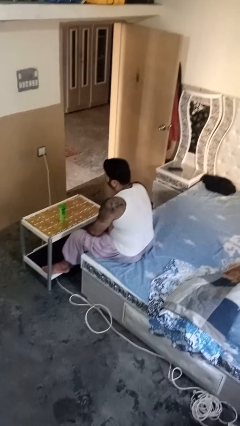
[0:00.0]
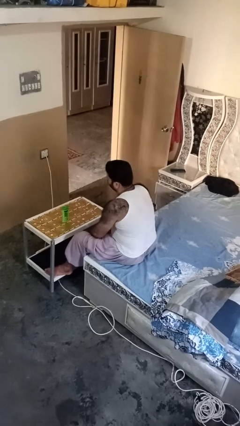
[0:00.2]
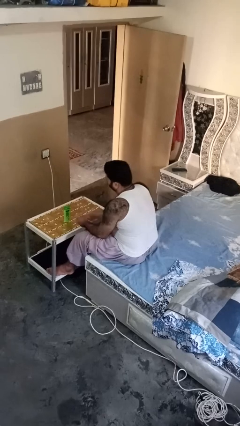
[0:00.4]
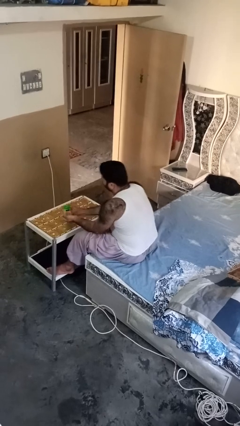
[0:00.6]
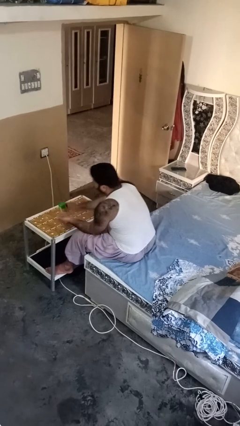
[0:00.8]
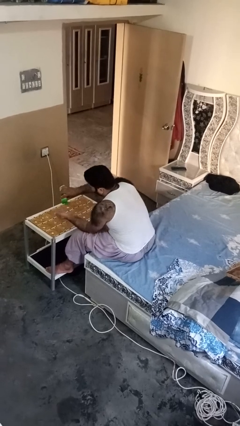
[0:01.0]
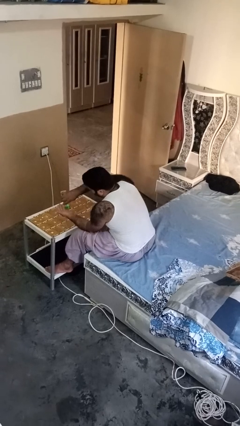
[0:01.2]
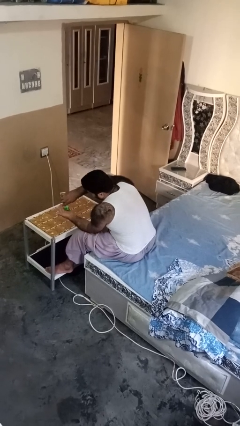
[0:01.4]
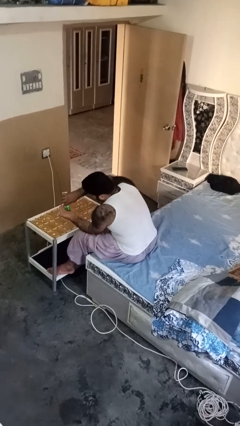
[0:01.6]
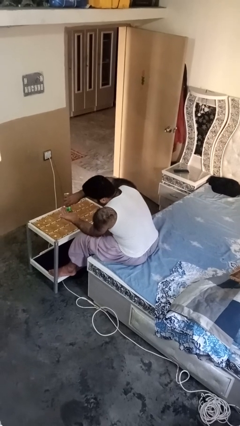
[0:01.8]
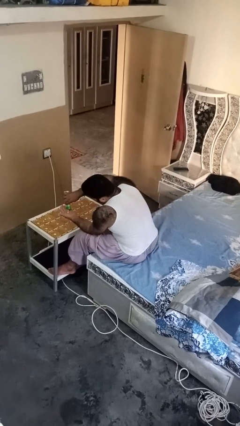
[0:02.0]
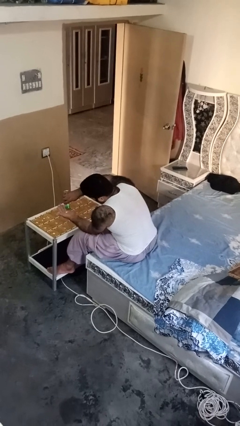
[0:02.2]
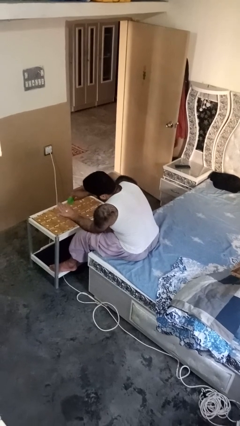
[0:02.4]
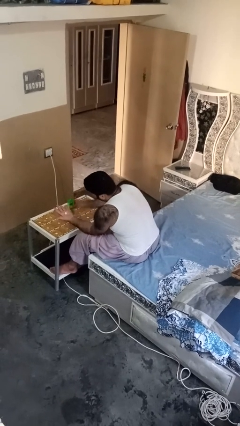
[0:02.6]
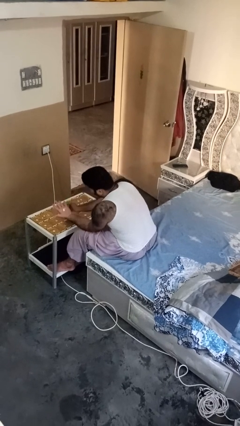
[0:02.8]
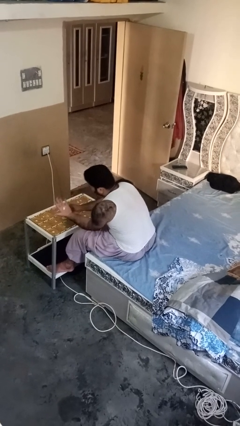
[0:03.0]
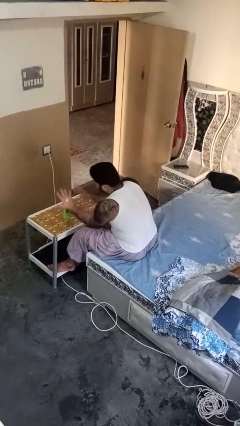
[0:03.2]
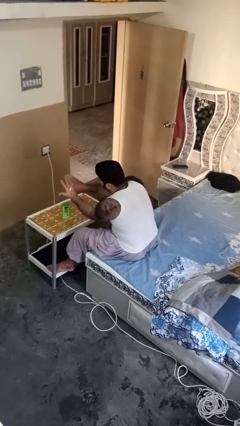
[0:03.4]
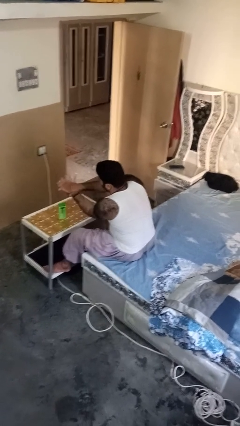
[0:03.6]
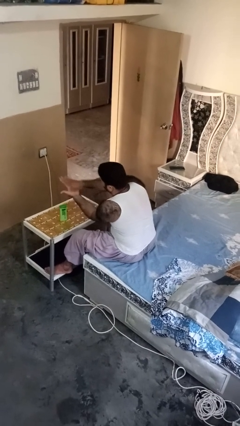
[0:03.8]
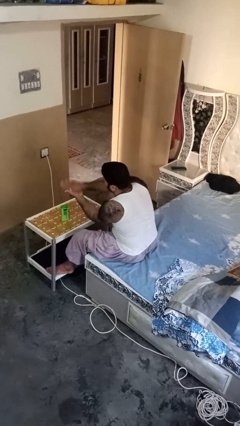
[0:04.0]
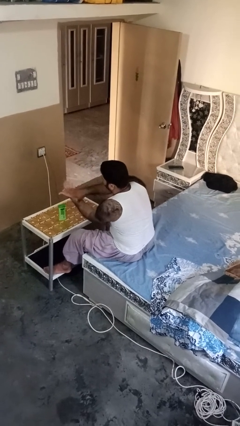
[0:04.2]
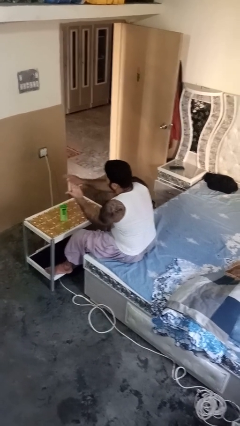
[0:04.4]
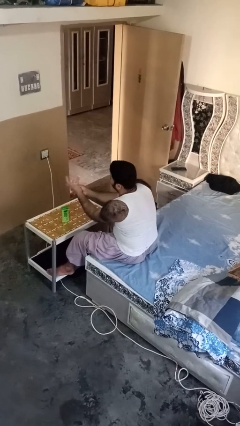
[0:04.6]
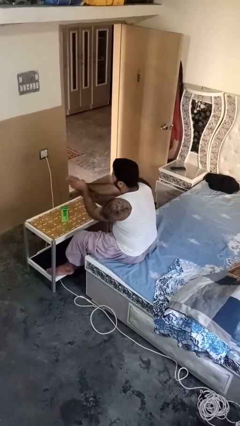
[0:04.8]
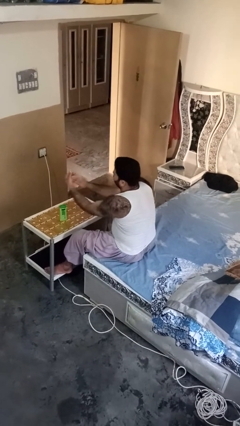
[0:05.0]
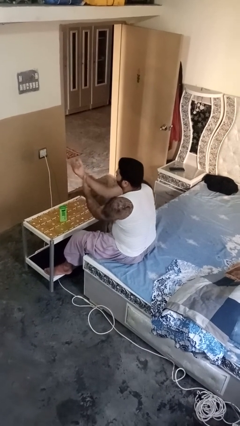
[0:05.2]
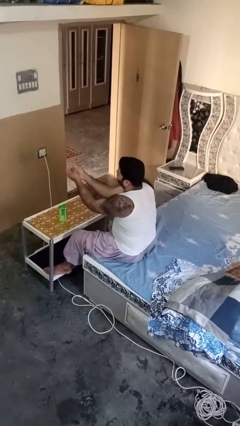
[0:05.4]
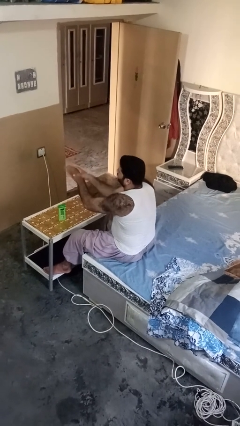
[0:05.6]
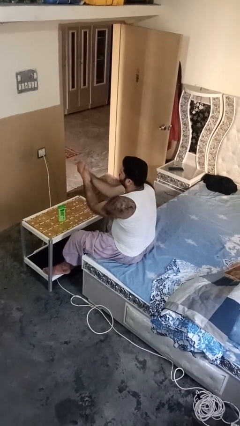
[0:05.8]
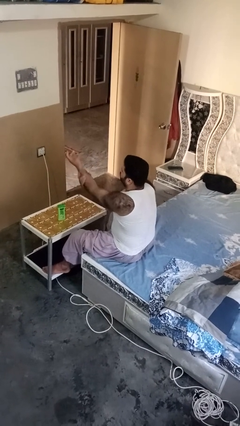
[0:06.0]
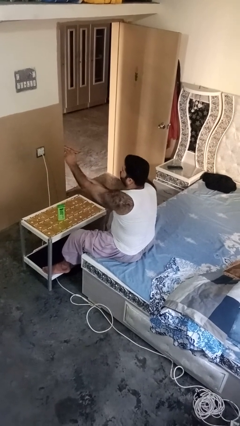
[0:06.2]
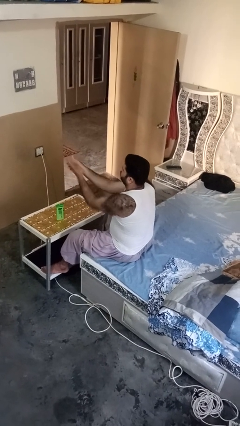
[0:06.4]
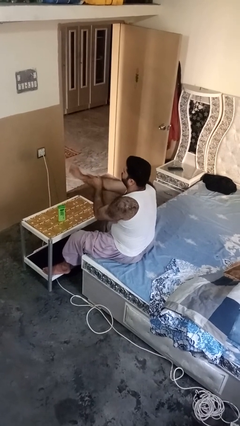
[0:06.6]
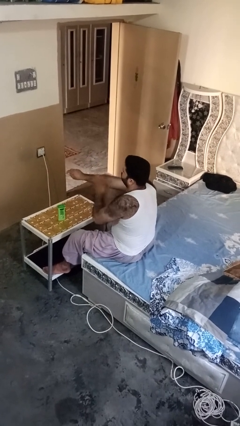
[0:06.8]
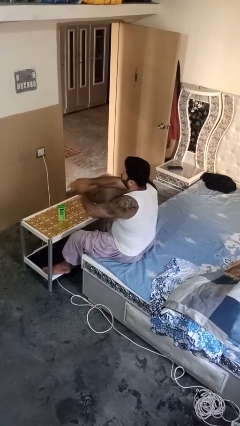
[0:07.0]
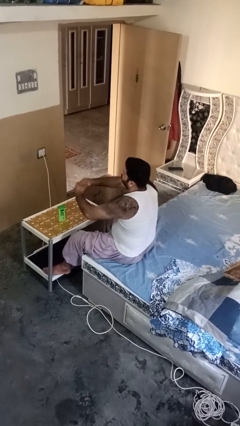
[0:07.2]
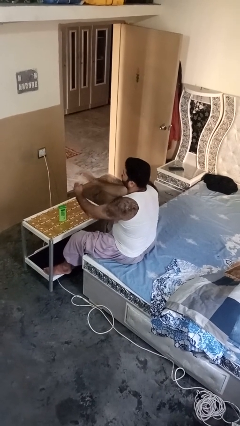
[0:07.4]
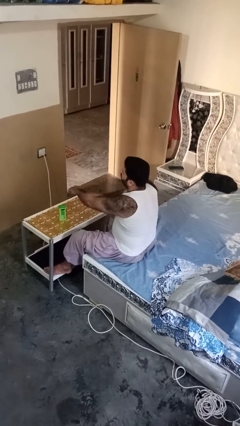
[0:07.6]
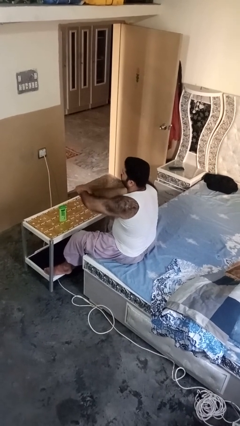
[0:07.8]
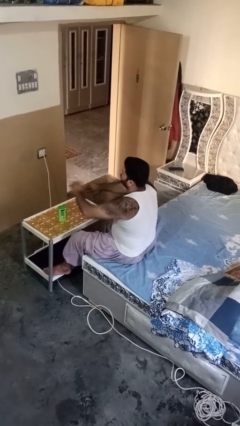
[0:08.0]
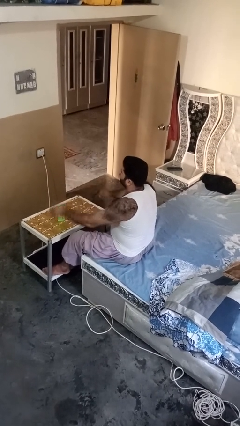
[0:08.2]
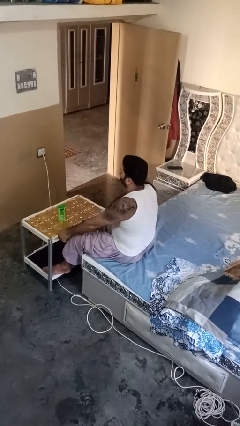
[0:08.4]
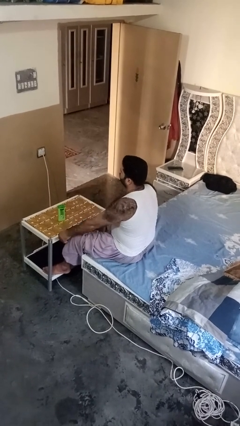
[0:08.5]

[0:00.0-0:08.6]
person applies sunscreen

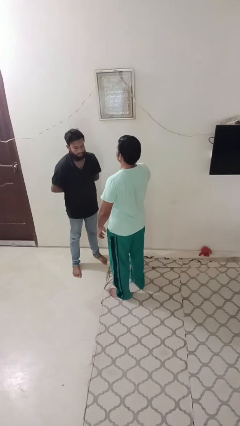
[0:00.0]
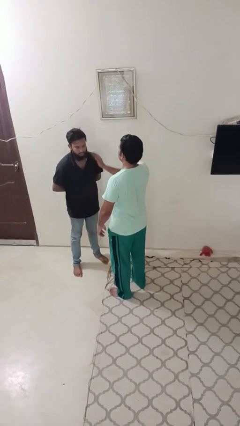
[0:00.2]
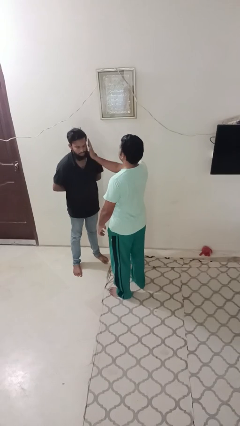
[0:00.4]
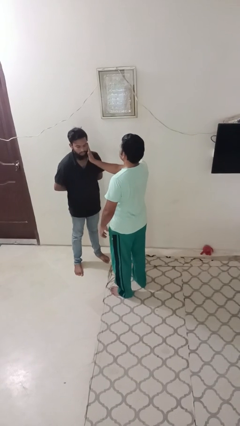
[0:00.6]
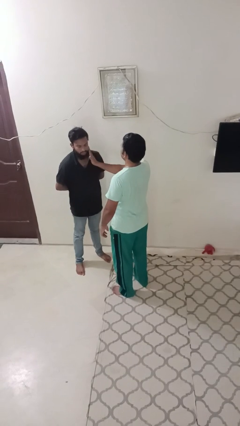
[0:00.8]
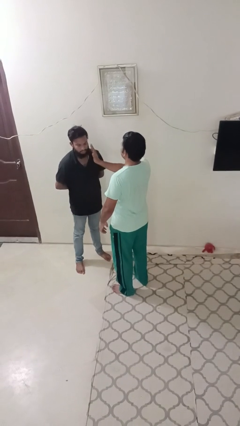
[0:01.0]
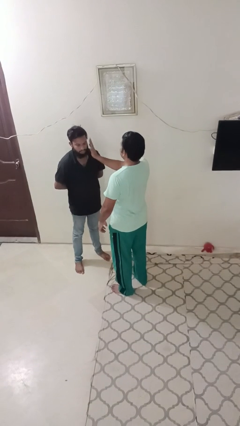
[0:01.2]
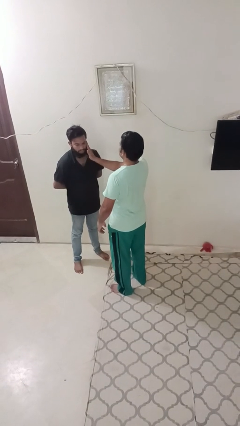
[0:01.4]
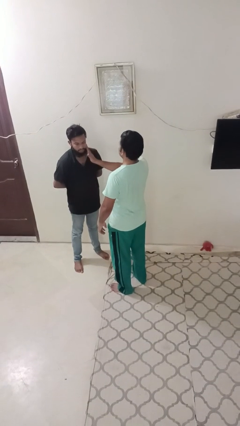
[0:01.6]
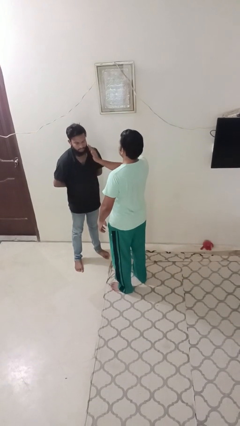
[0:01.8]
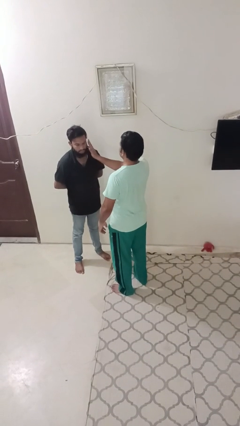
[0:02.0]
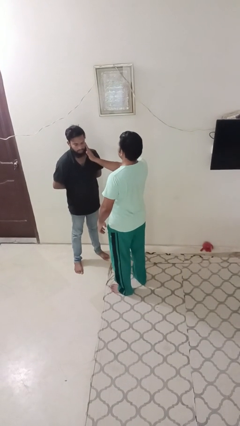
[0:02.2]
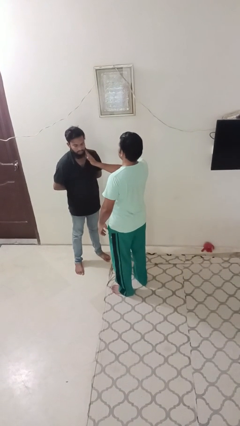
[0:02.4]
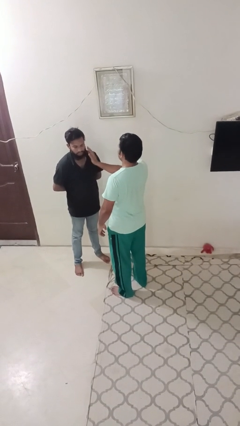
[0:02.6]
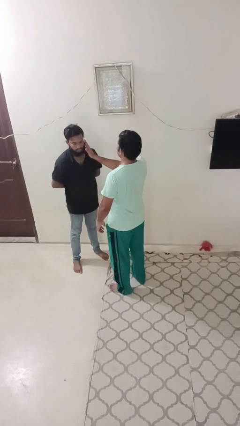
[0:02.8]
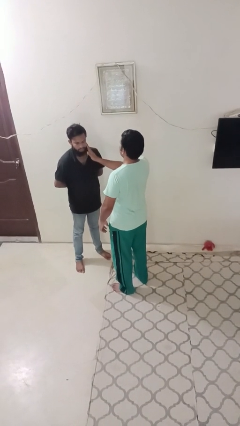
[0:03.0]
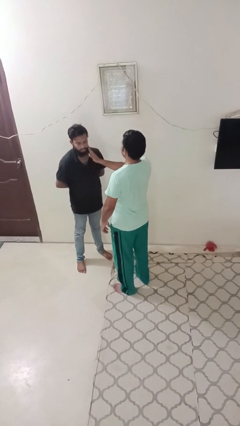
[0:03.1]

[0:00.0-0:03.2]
person touches face of person

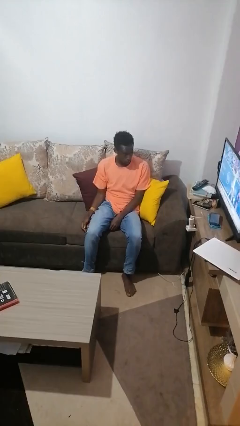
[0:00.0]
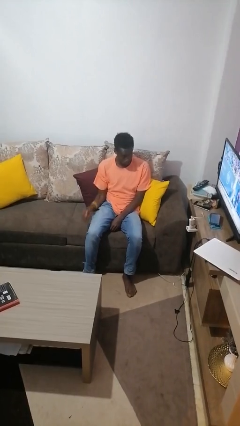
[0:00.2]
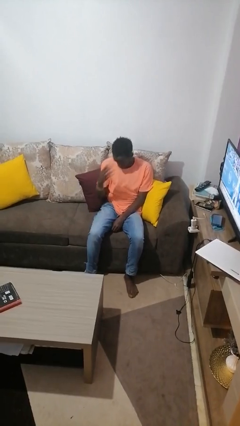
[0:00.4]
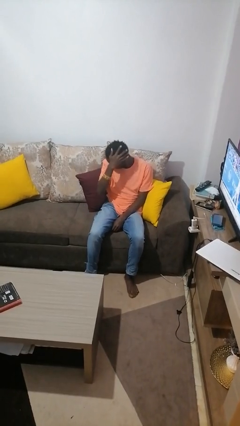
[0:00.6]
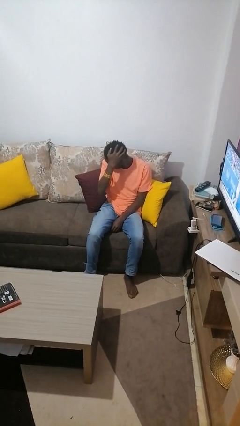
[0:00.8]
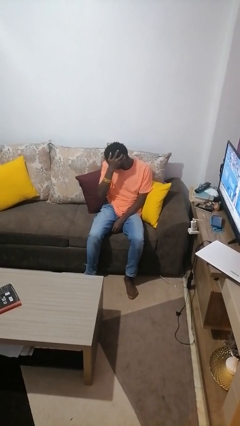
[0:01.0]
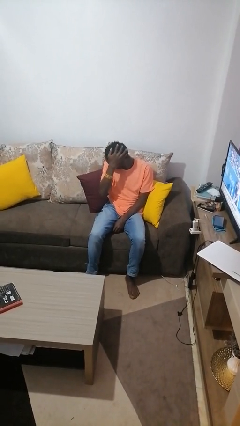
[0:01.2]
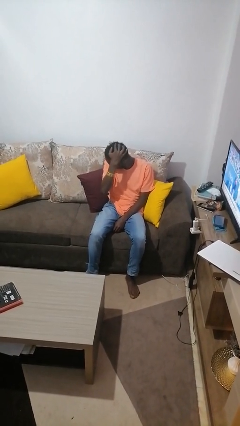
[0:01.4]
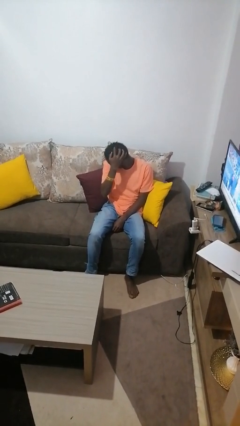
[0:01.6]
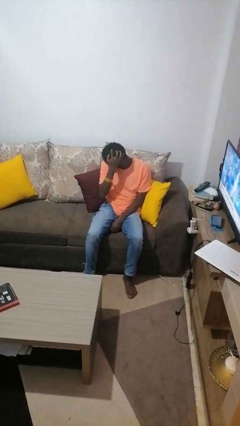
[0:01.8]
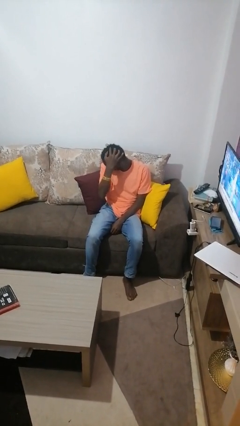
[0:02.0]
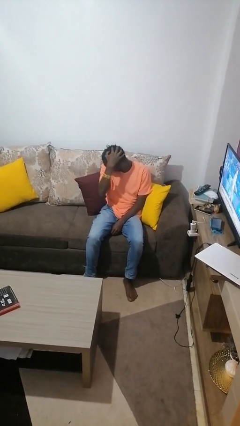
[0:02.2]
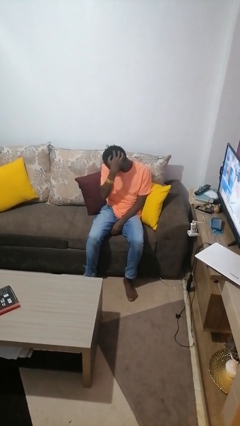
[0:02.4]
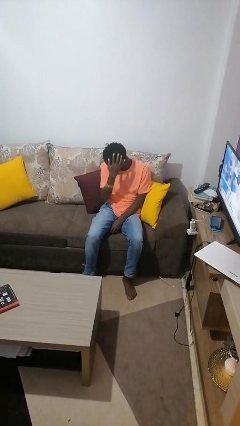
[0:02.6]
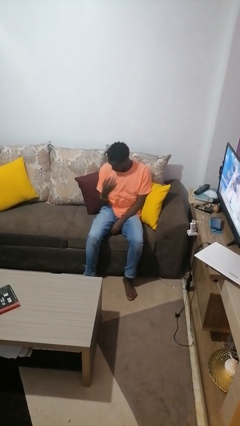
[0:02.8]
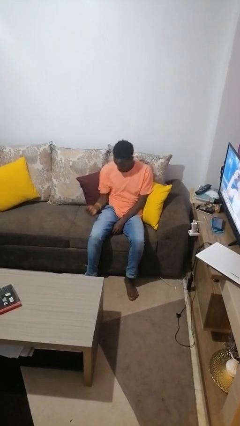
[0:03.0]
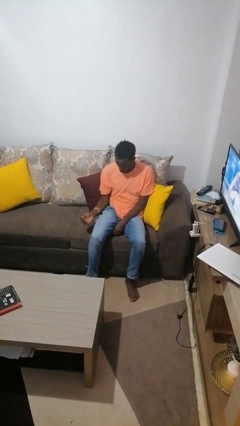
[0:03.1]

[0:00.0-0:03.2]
person strokes hair

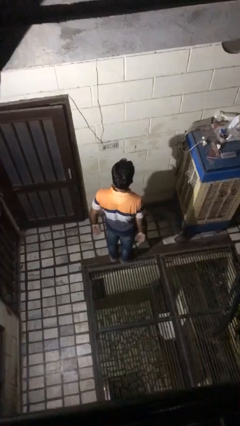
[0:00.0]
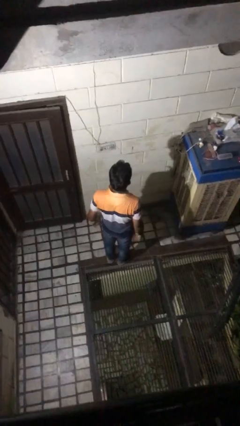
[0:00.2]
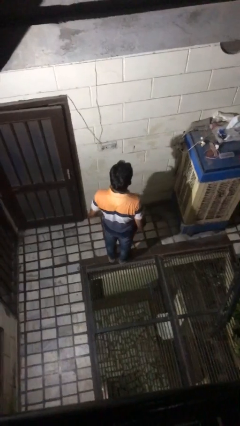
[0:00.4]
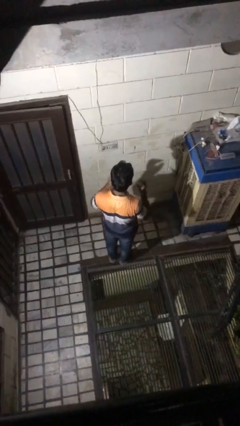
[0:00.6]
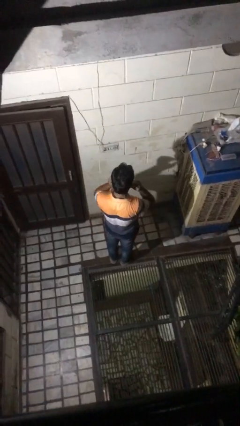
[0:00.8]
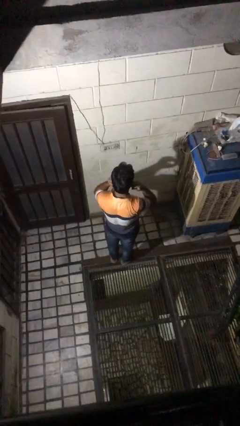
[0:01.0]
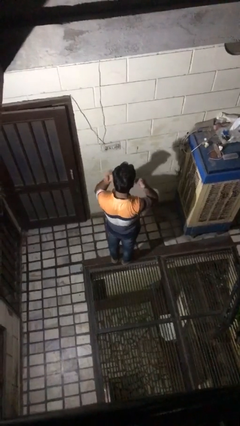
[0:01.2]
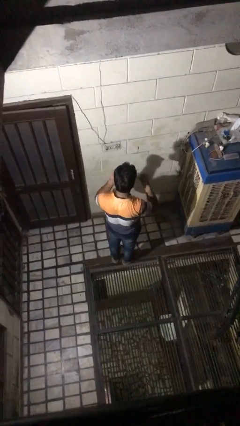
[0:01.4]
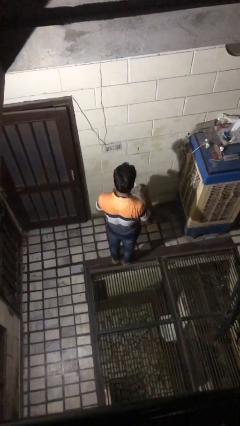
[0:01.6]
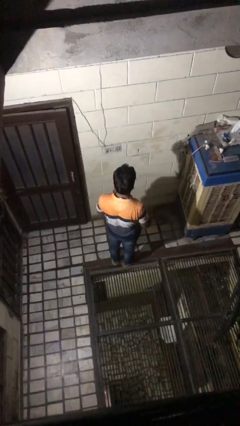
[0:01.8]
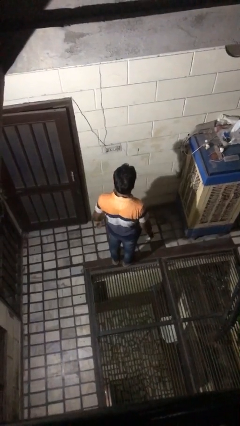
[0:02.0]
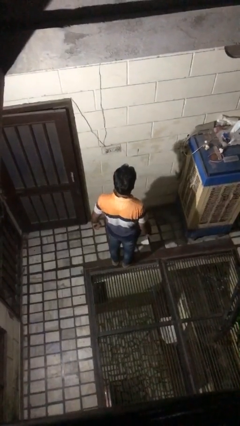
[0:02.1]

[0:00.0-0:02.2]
person takes off facemask

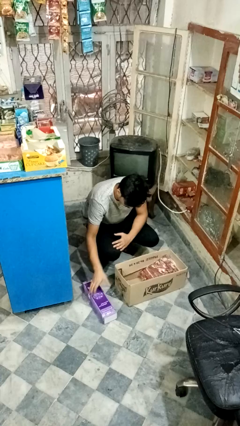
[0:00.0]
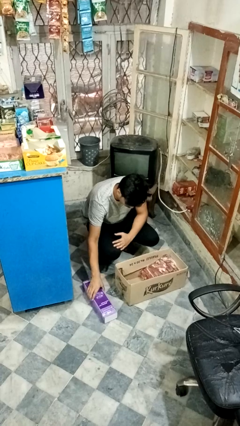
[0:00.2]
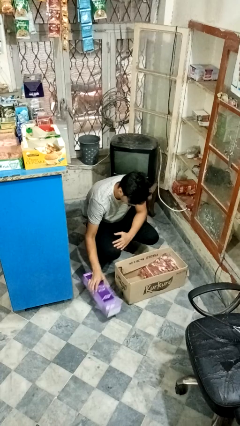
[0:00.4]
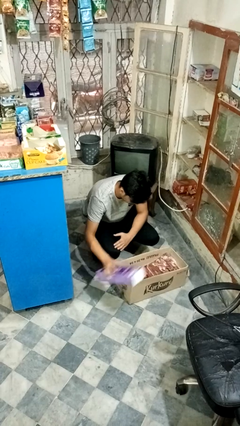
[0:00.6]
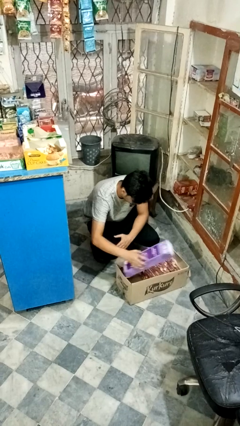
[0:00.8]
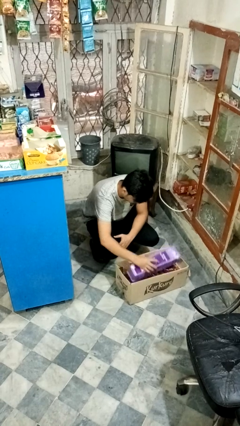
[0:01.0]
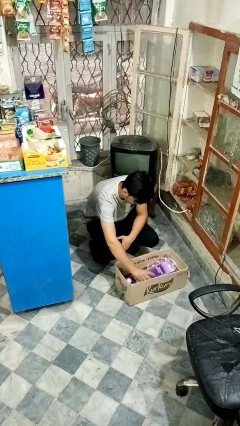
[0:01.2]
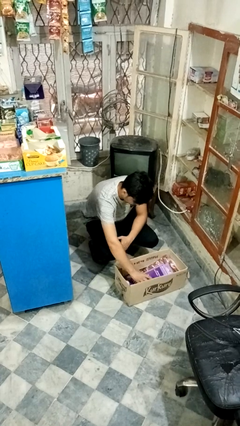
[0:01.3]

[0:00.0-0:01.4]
person puts object into box
